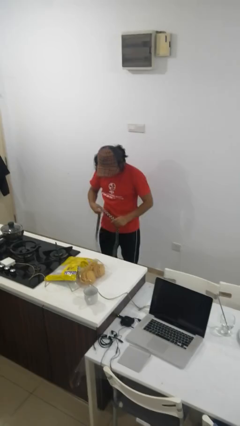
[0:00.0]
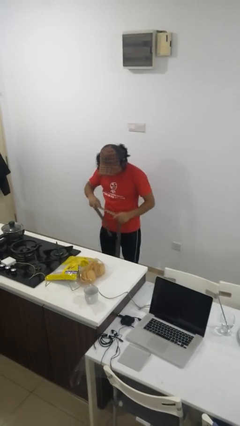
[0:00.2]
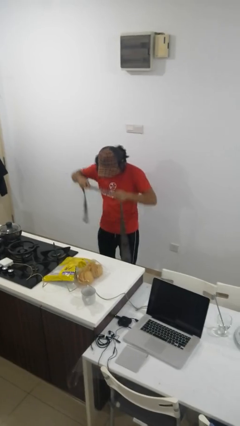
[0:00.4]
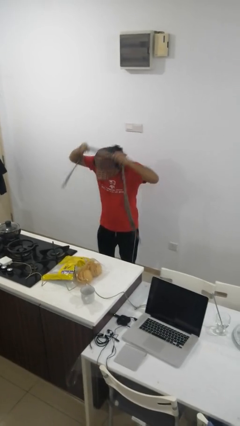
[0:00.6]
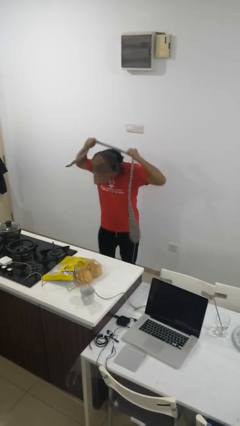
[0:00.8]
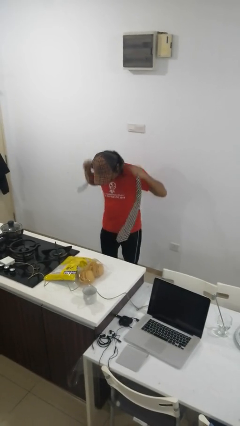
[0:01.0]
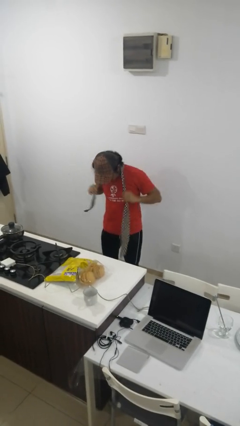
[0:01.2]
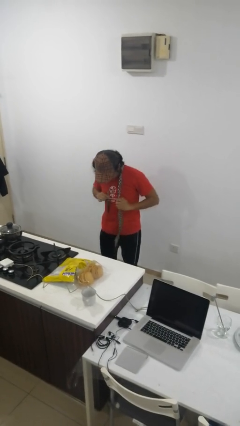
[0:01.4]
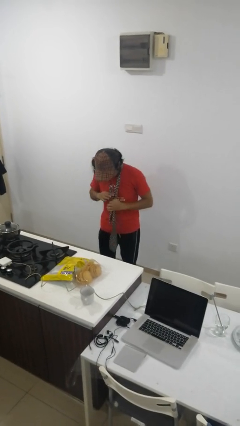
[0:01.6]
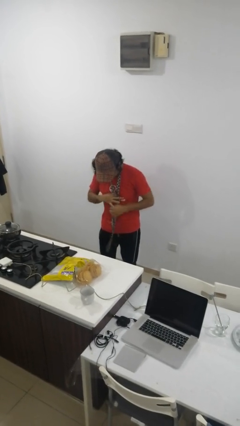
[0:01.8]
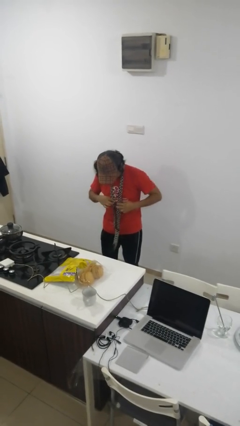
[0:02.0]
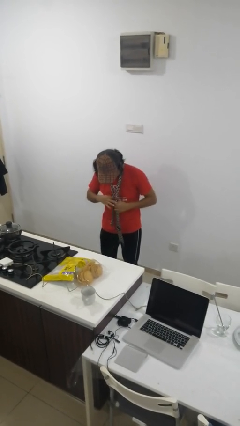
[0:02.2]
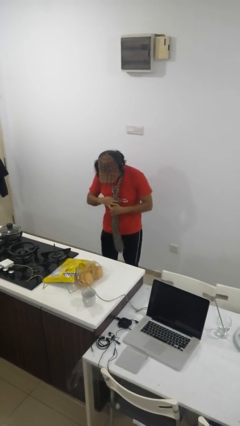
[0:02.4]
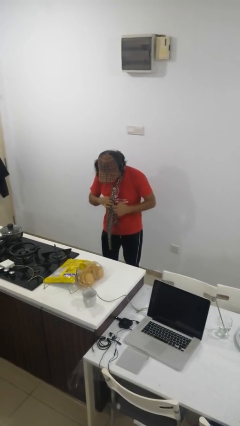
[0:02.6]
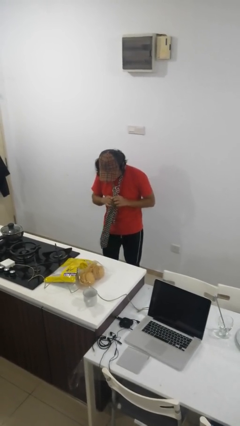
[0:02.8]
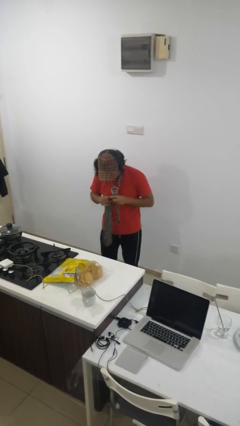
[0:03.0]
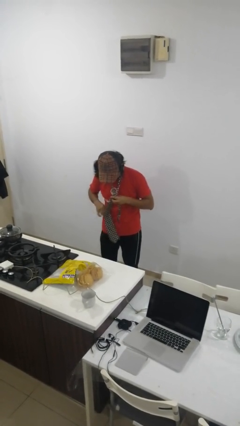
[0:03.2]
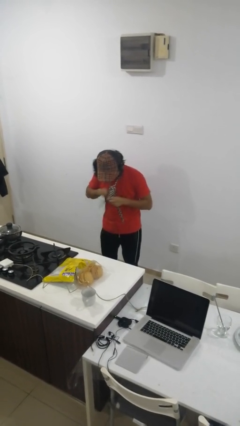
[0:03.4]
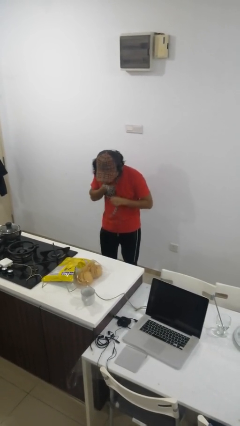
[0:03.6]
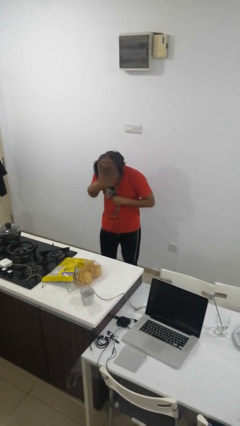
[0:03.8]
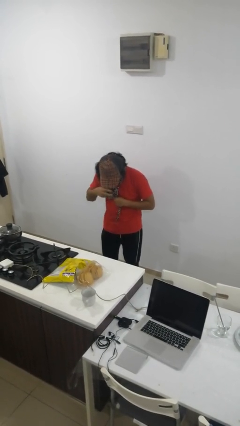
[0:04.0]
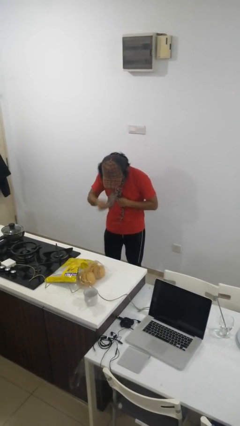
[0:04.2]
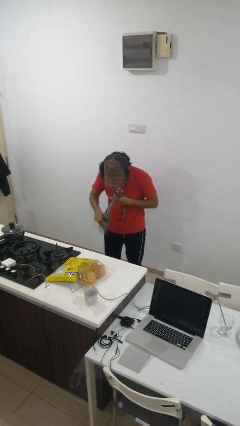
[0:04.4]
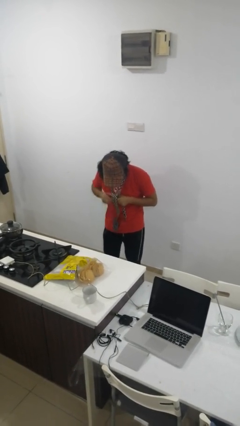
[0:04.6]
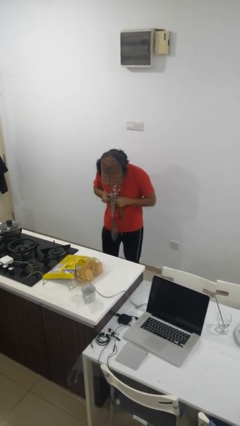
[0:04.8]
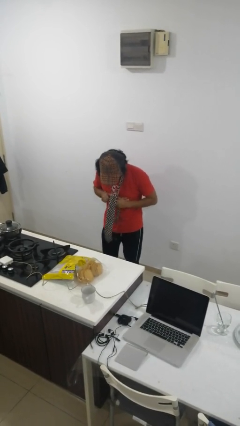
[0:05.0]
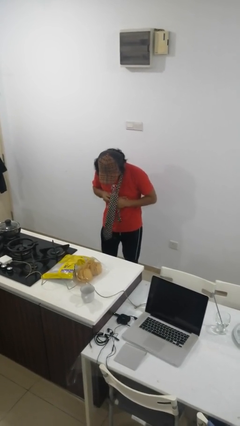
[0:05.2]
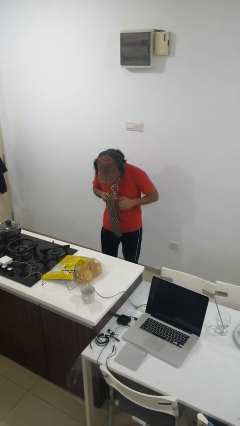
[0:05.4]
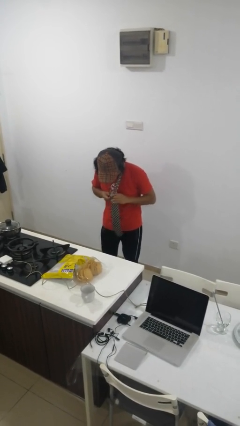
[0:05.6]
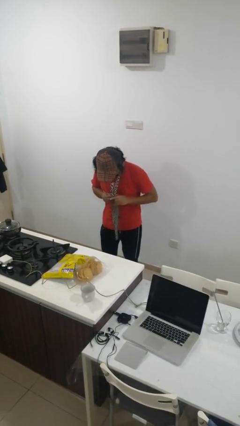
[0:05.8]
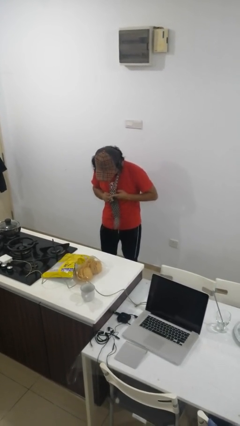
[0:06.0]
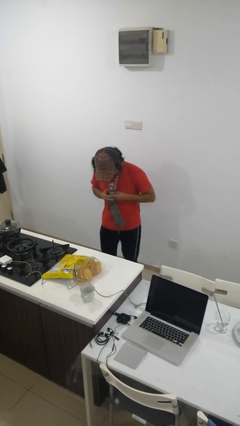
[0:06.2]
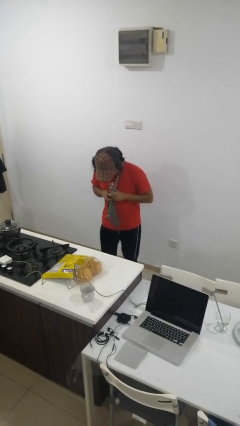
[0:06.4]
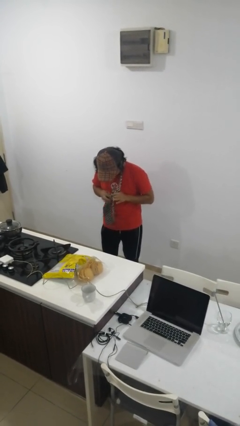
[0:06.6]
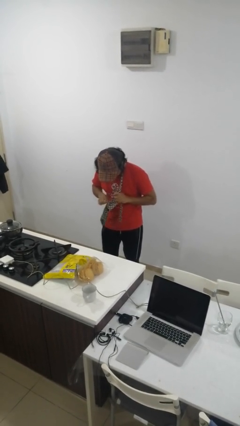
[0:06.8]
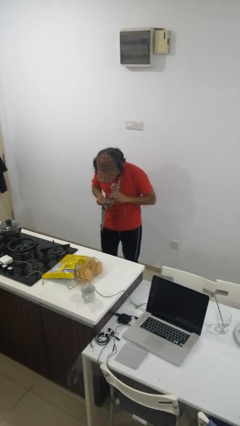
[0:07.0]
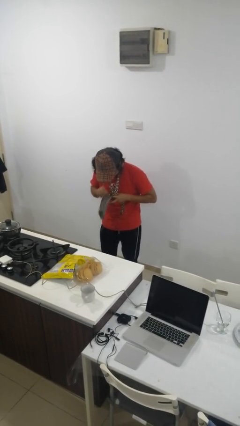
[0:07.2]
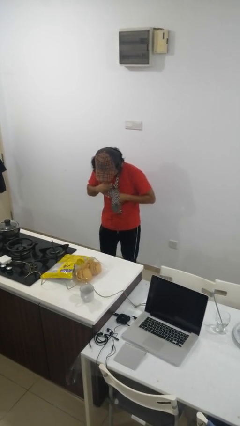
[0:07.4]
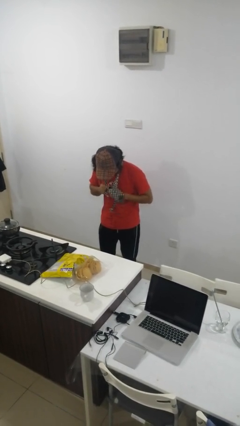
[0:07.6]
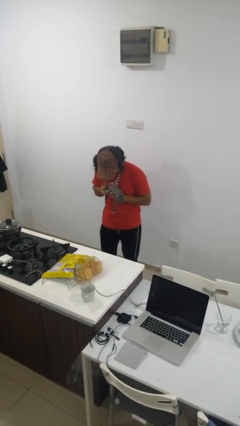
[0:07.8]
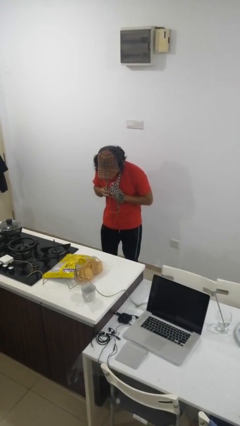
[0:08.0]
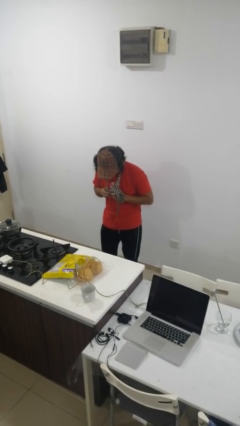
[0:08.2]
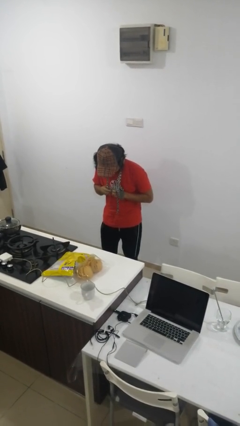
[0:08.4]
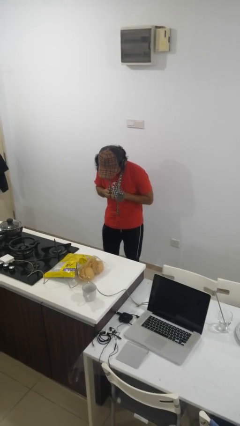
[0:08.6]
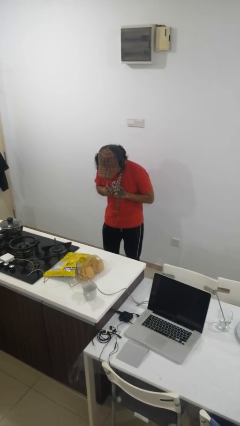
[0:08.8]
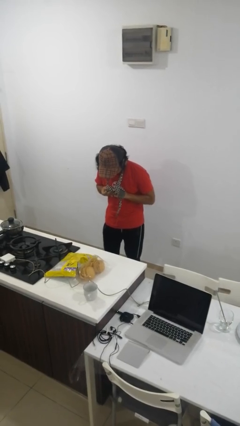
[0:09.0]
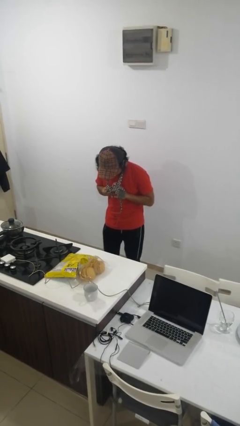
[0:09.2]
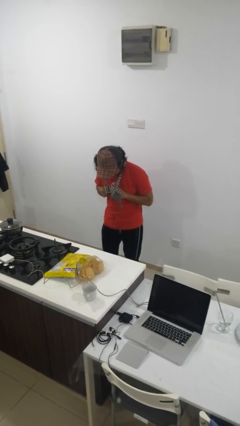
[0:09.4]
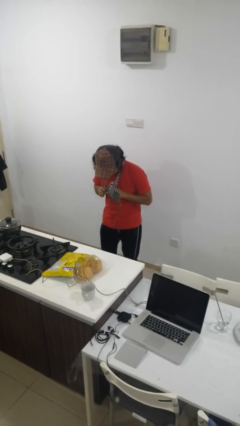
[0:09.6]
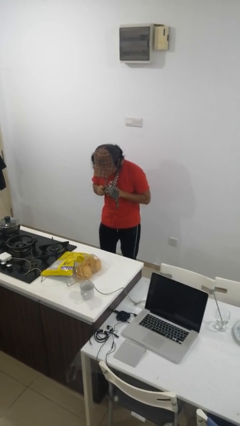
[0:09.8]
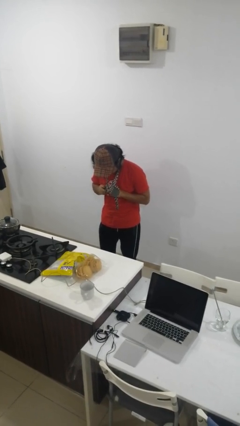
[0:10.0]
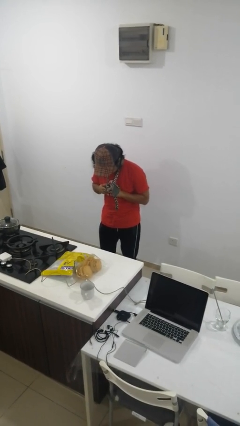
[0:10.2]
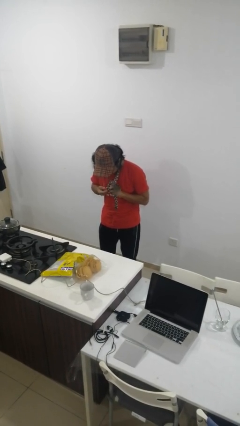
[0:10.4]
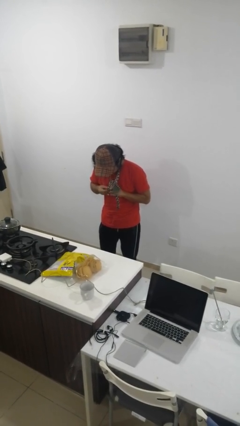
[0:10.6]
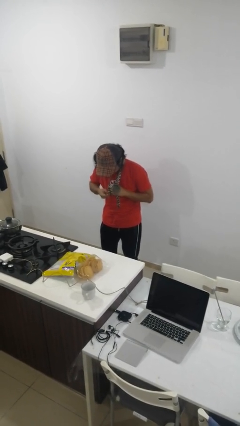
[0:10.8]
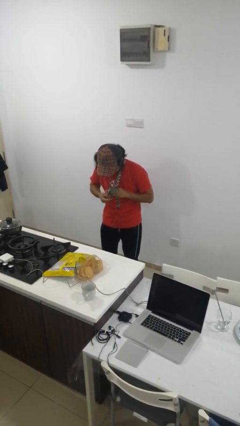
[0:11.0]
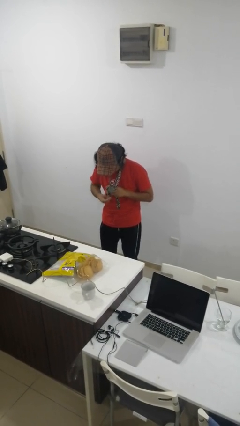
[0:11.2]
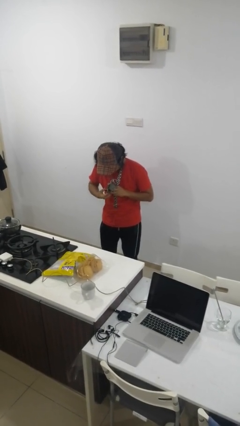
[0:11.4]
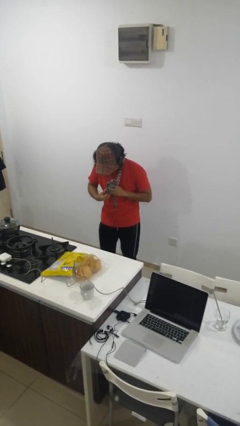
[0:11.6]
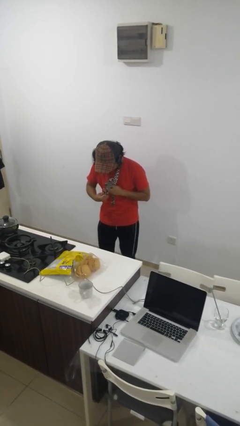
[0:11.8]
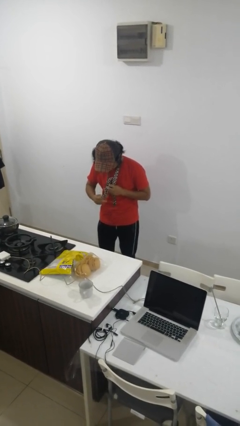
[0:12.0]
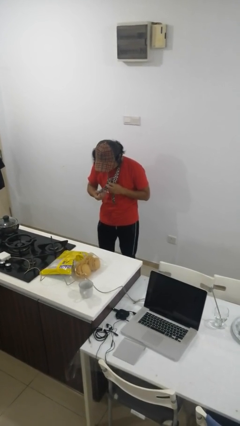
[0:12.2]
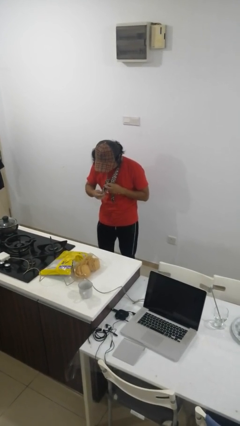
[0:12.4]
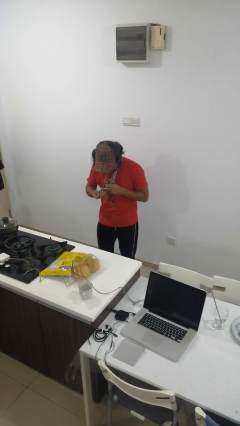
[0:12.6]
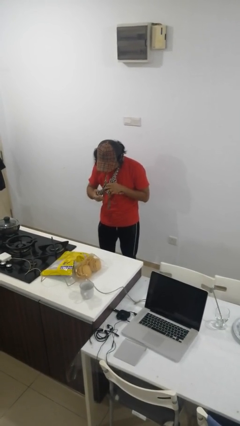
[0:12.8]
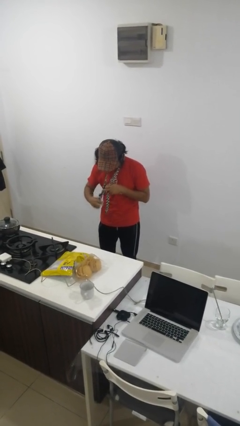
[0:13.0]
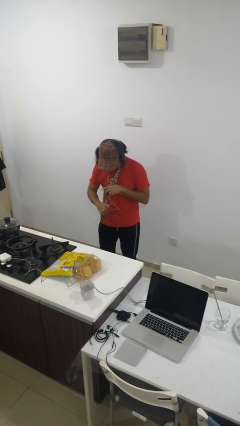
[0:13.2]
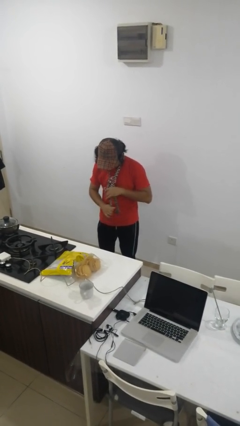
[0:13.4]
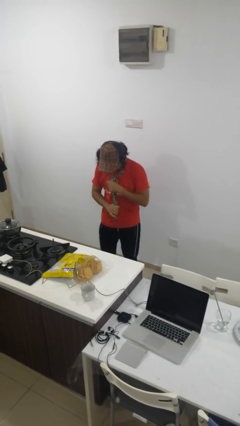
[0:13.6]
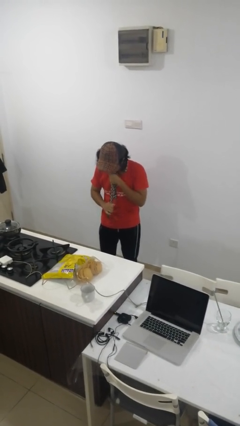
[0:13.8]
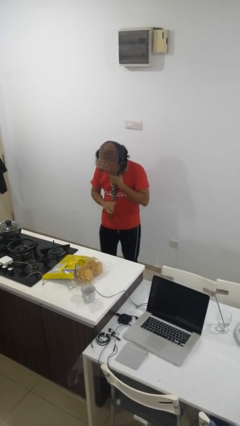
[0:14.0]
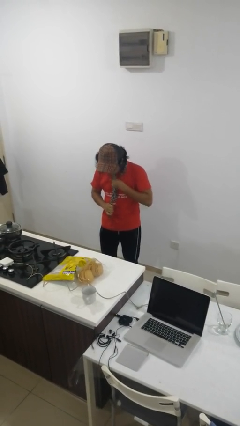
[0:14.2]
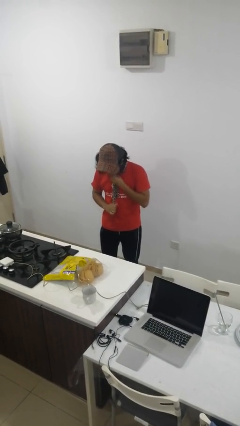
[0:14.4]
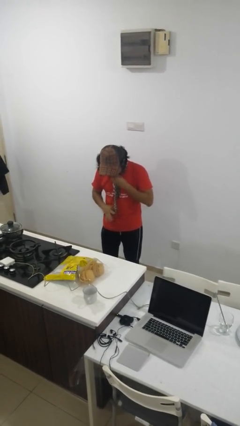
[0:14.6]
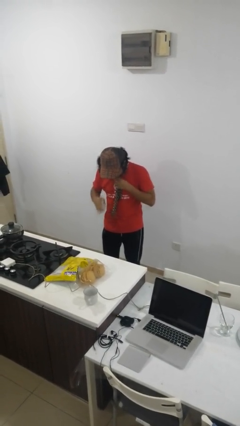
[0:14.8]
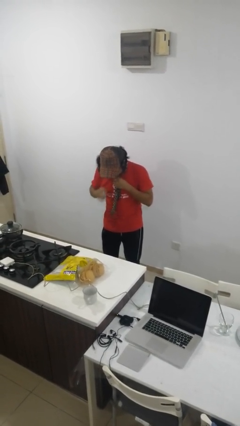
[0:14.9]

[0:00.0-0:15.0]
person puts on necktie

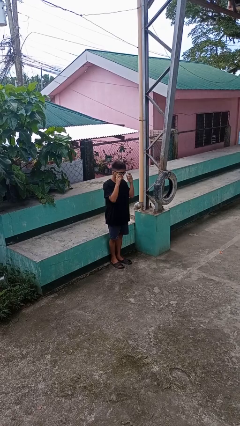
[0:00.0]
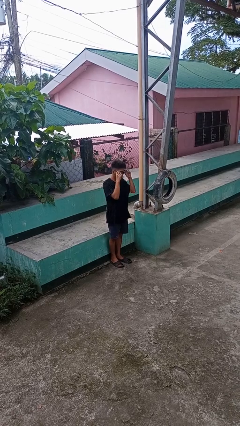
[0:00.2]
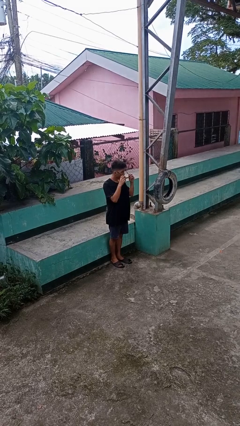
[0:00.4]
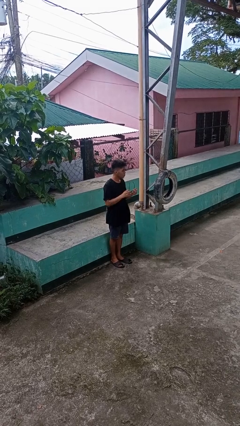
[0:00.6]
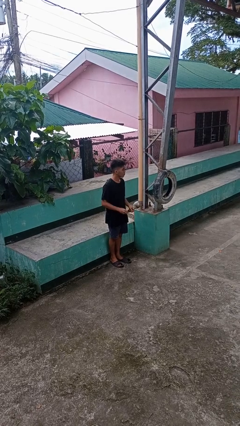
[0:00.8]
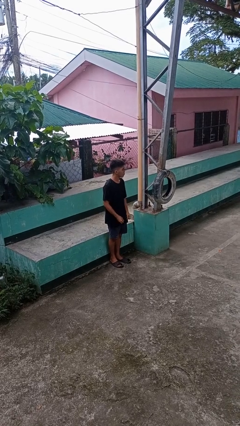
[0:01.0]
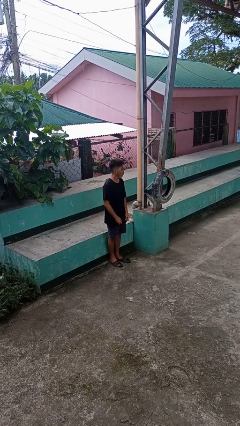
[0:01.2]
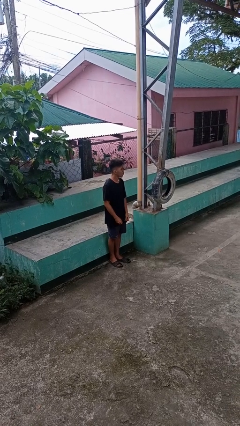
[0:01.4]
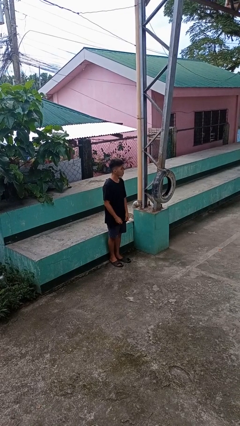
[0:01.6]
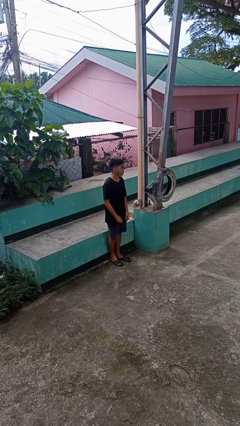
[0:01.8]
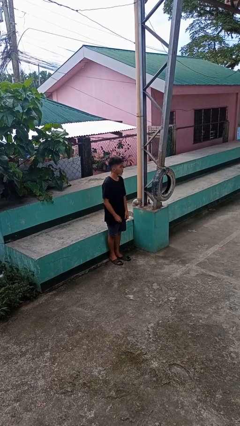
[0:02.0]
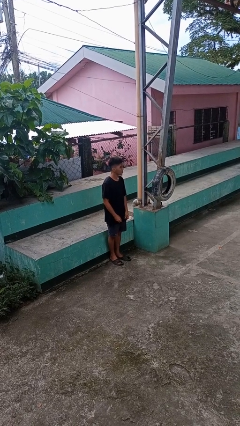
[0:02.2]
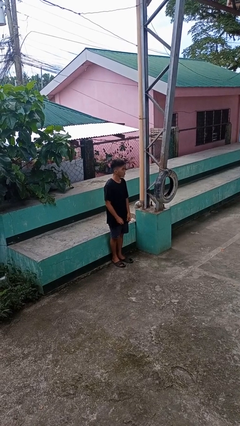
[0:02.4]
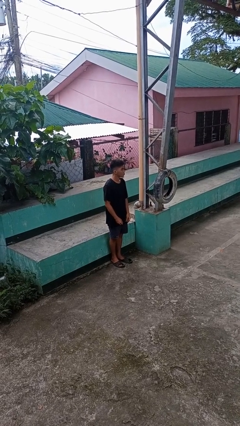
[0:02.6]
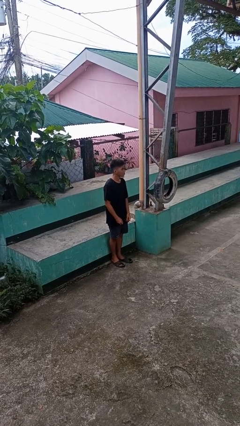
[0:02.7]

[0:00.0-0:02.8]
person takes off sunglasses

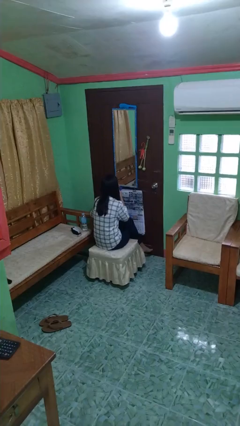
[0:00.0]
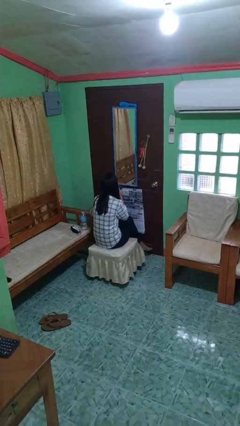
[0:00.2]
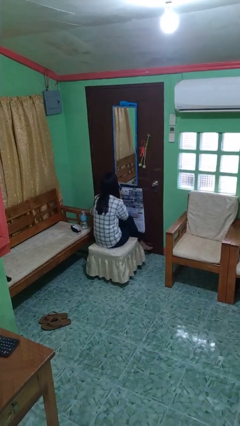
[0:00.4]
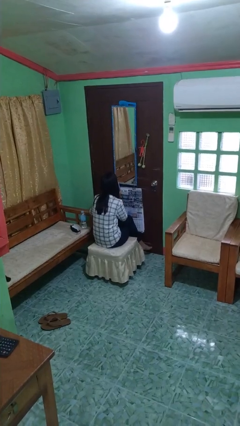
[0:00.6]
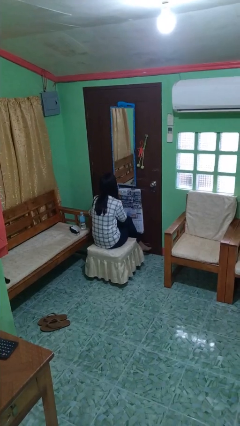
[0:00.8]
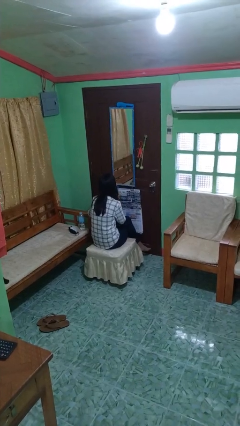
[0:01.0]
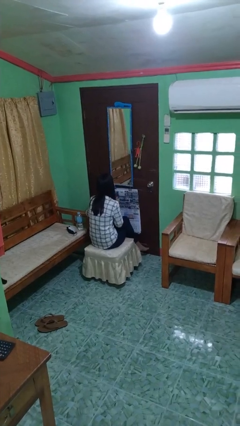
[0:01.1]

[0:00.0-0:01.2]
person wipes mouth with napkin
